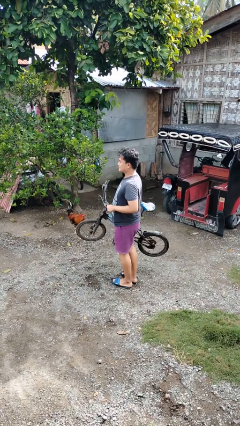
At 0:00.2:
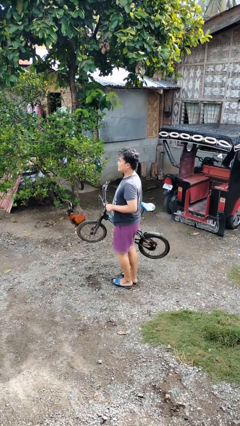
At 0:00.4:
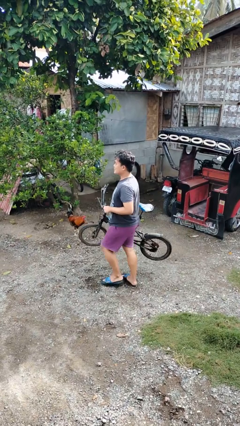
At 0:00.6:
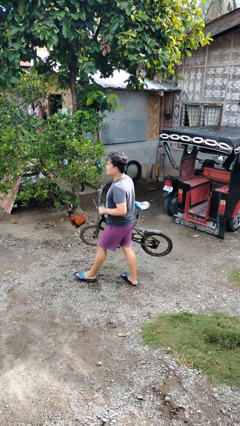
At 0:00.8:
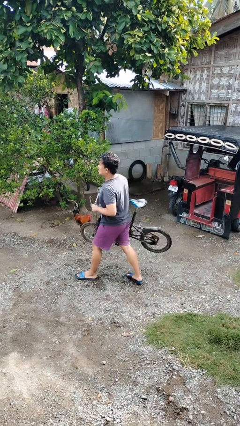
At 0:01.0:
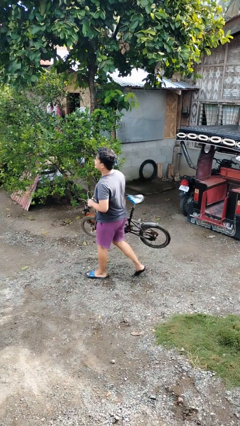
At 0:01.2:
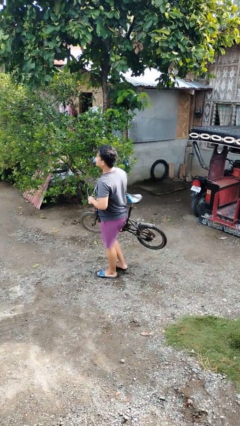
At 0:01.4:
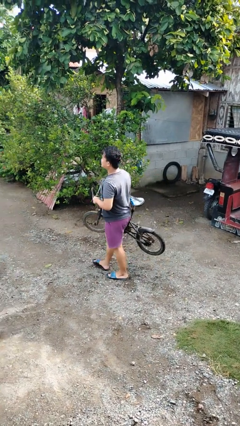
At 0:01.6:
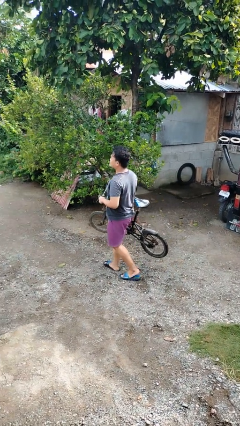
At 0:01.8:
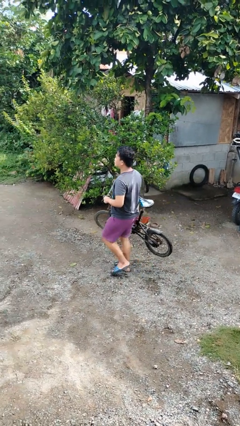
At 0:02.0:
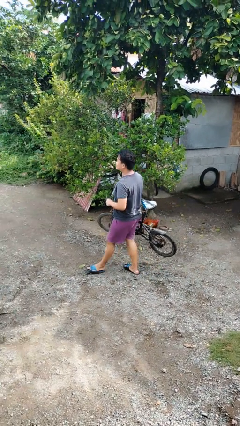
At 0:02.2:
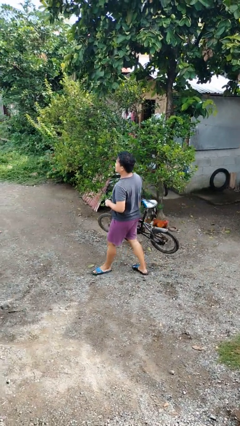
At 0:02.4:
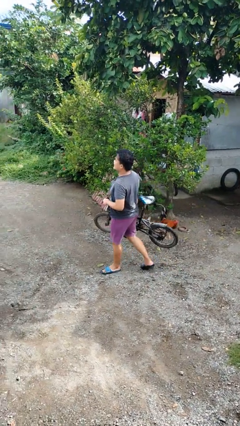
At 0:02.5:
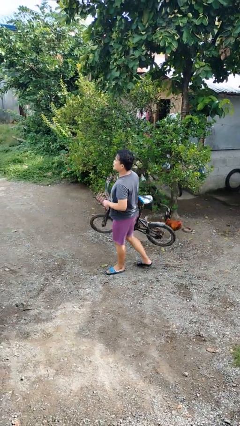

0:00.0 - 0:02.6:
person carries bicycle

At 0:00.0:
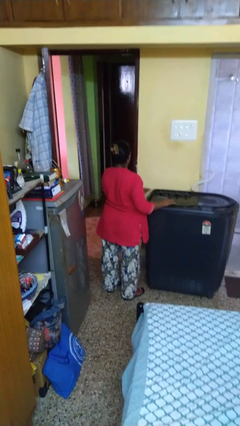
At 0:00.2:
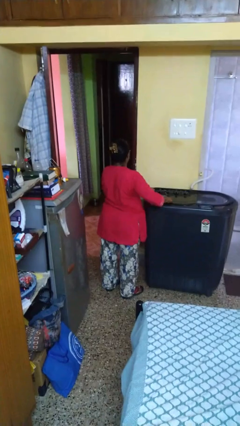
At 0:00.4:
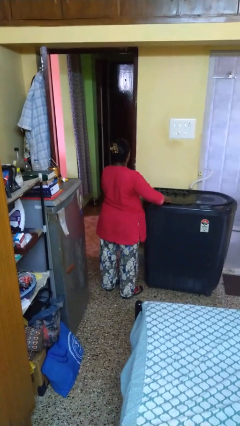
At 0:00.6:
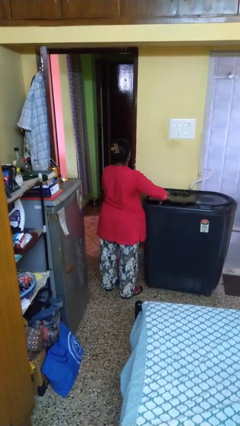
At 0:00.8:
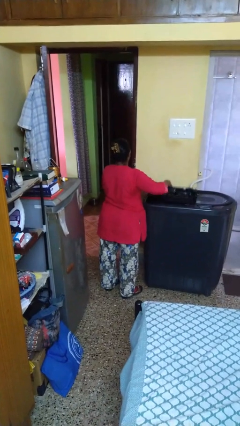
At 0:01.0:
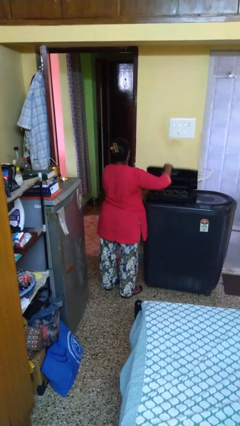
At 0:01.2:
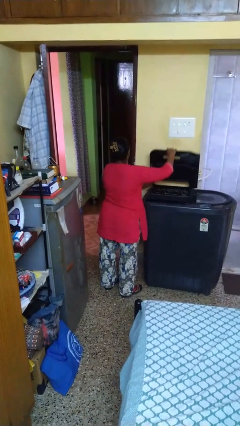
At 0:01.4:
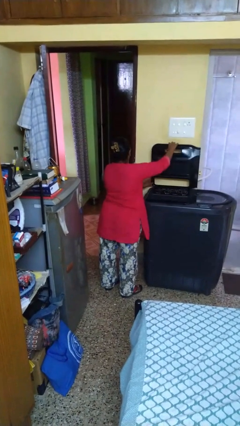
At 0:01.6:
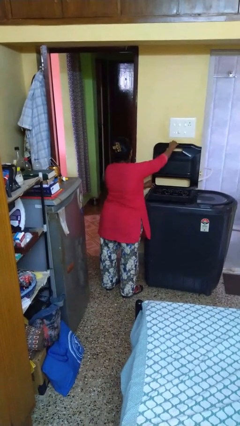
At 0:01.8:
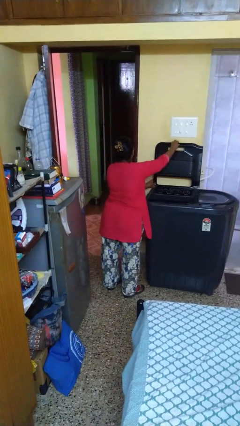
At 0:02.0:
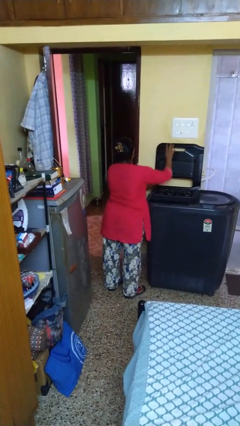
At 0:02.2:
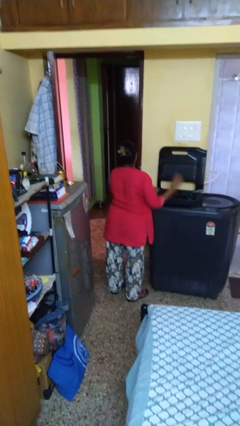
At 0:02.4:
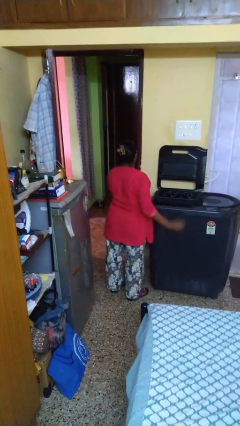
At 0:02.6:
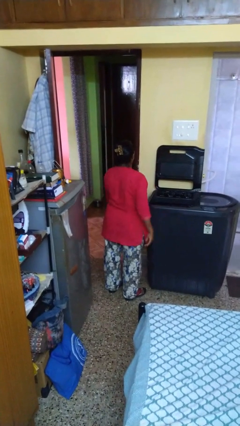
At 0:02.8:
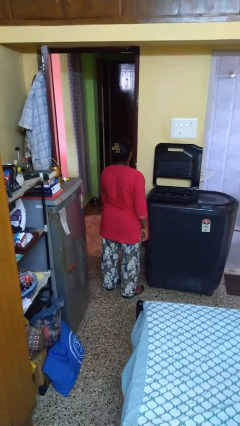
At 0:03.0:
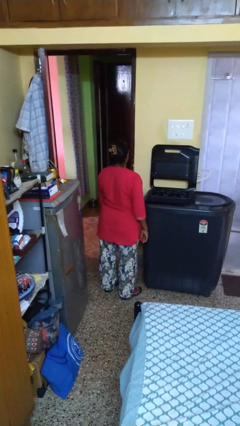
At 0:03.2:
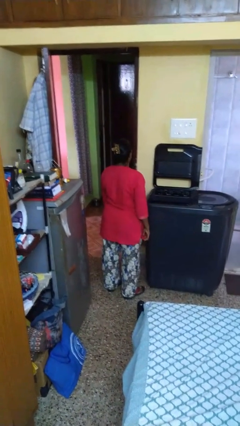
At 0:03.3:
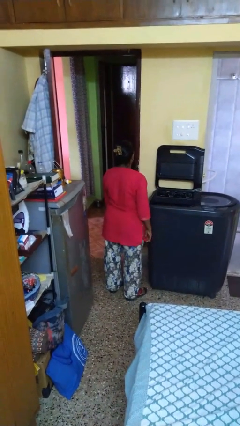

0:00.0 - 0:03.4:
person opens clothes washer

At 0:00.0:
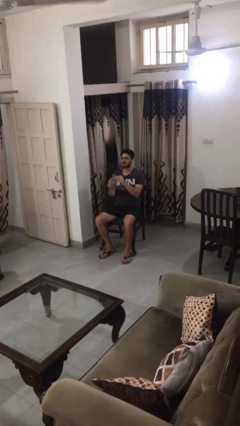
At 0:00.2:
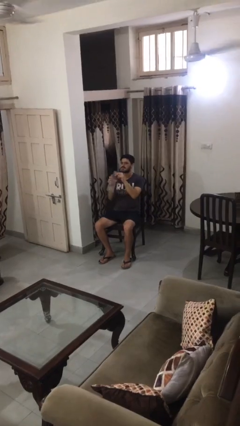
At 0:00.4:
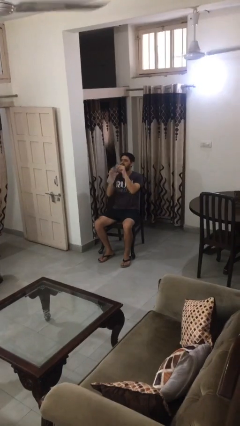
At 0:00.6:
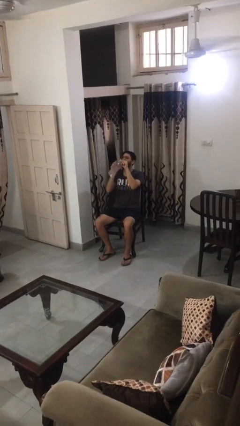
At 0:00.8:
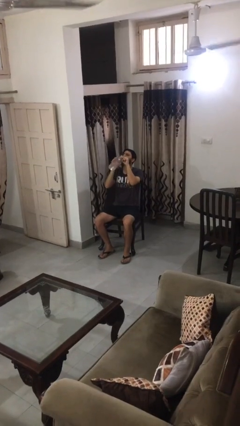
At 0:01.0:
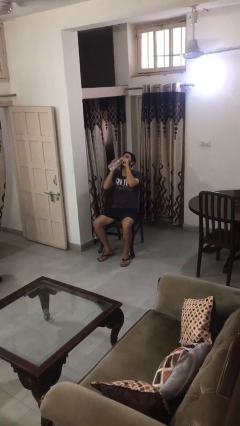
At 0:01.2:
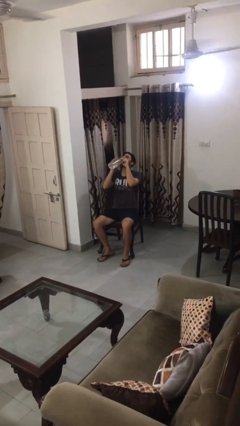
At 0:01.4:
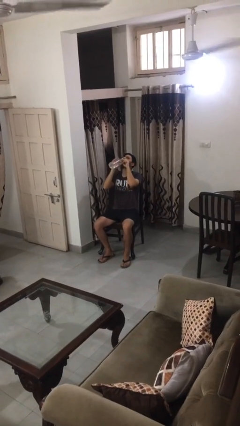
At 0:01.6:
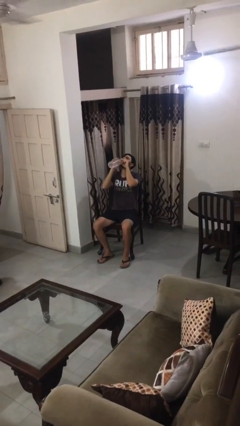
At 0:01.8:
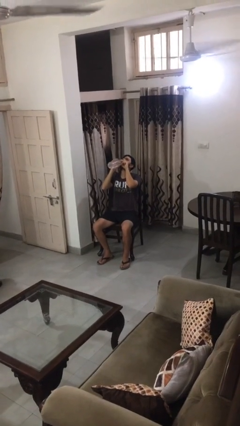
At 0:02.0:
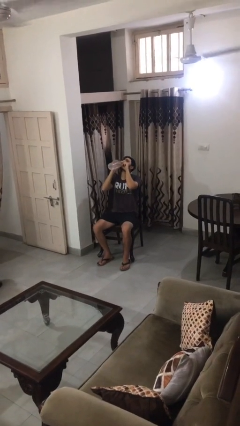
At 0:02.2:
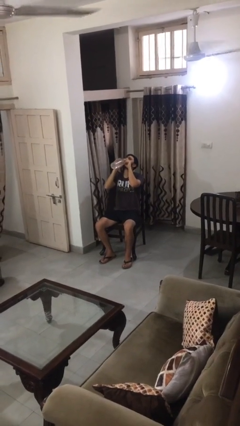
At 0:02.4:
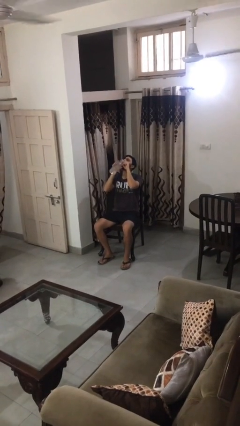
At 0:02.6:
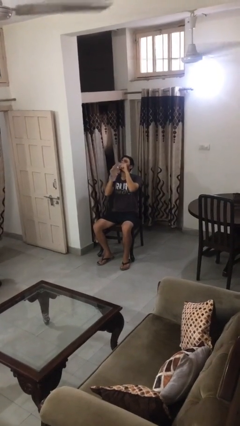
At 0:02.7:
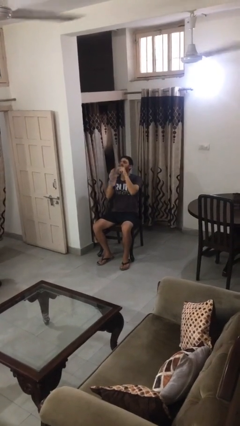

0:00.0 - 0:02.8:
person drinks from bottle

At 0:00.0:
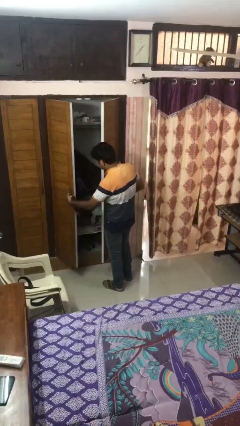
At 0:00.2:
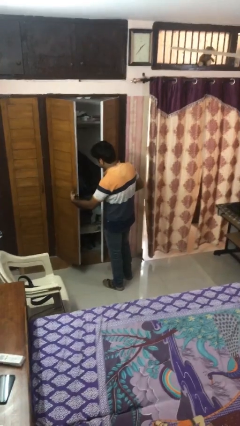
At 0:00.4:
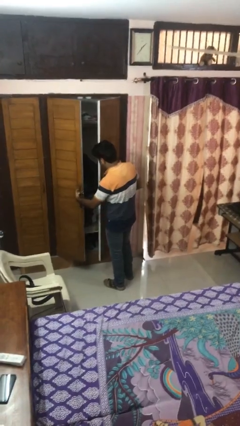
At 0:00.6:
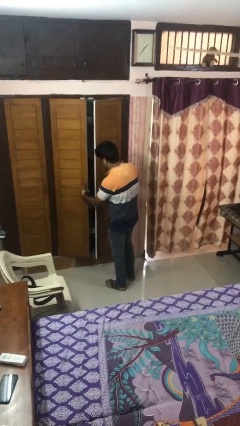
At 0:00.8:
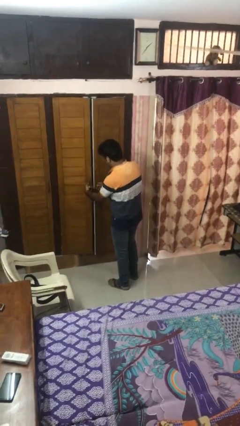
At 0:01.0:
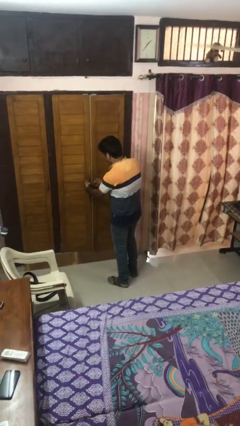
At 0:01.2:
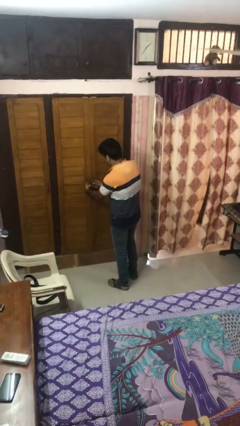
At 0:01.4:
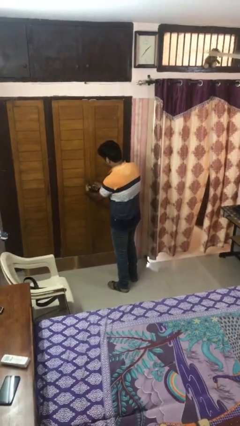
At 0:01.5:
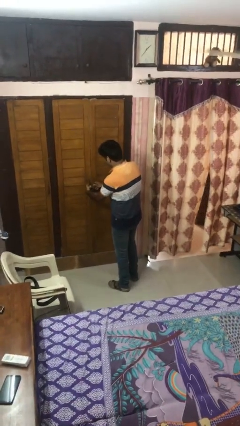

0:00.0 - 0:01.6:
person closes facility door

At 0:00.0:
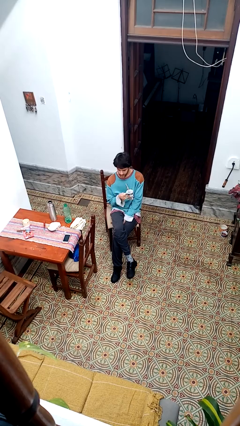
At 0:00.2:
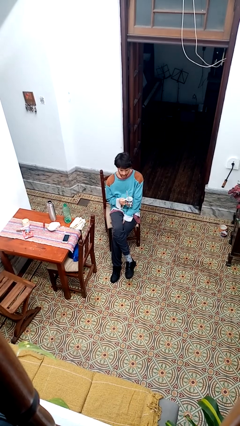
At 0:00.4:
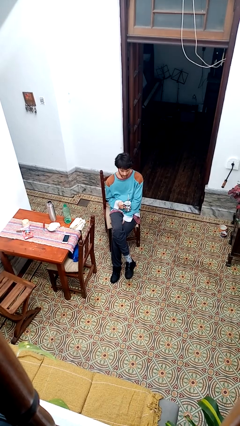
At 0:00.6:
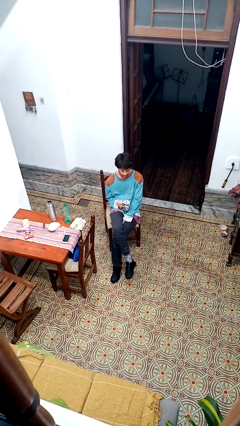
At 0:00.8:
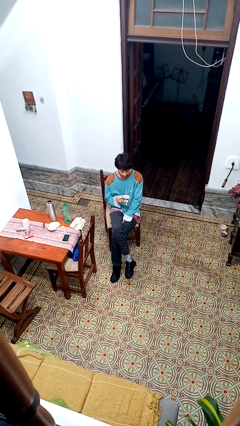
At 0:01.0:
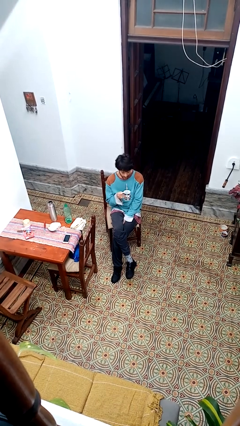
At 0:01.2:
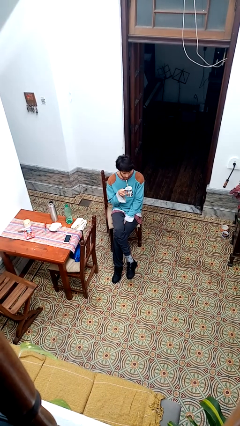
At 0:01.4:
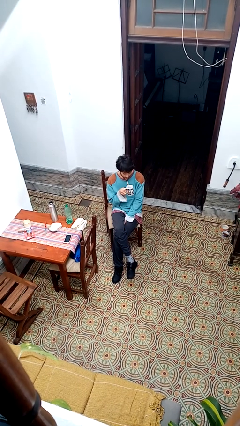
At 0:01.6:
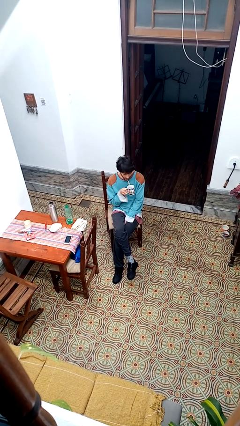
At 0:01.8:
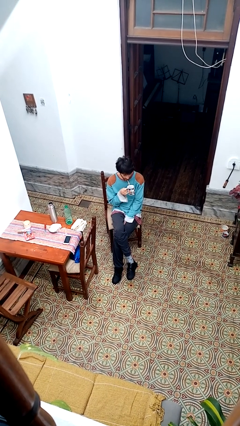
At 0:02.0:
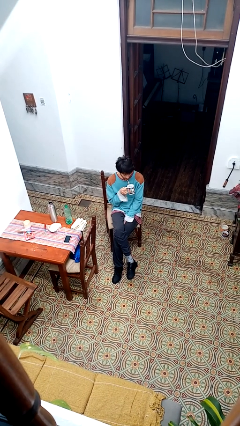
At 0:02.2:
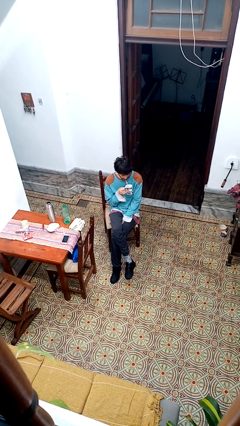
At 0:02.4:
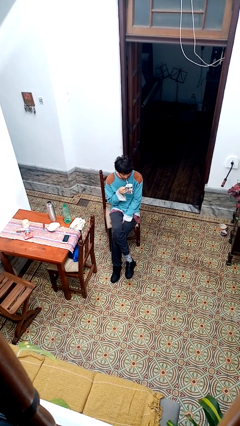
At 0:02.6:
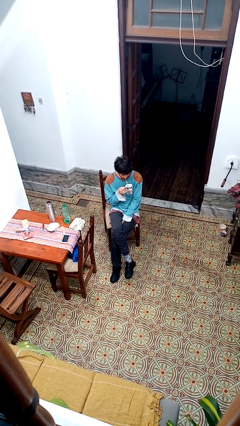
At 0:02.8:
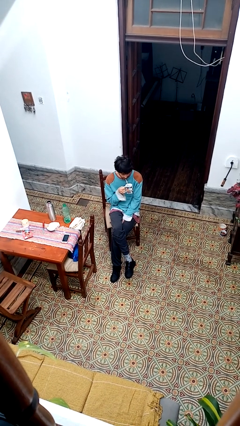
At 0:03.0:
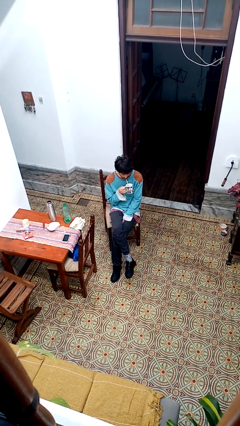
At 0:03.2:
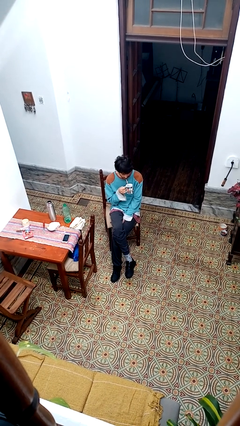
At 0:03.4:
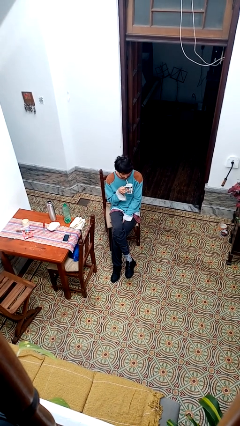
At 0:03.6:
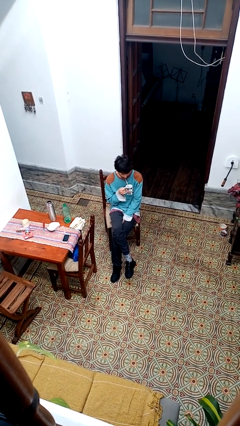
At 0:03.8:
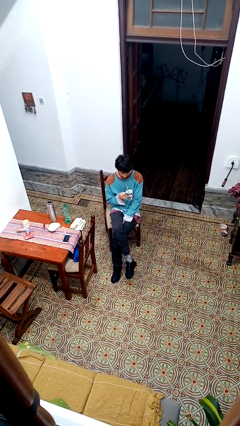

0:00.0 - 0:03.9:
person drinks from straw

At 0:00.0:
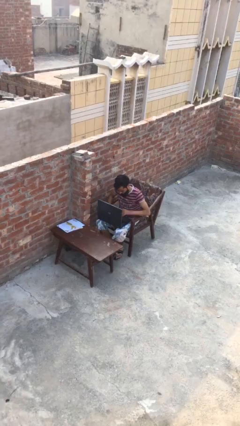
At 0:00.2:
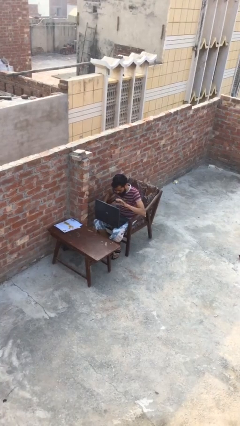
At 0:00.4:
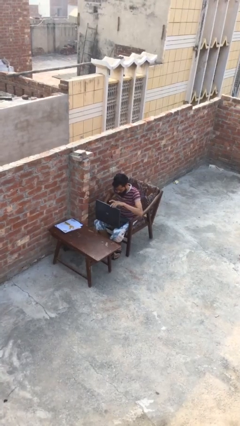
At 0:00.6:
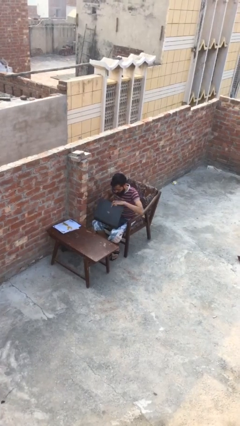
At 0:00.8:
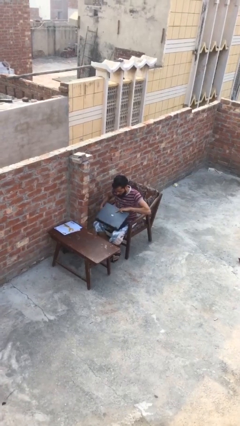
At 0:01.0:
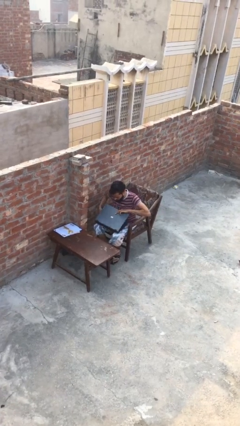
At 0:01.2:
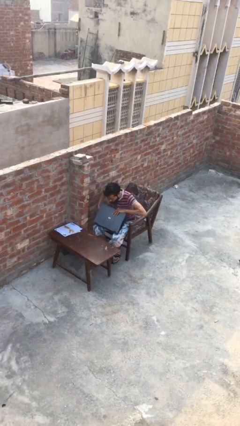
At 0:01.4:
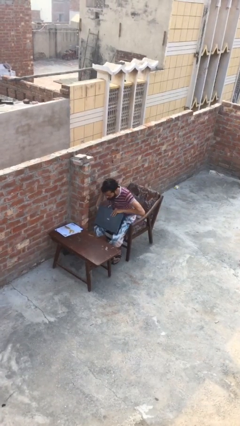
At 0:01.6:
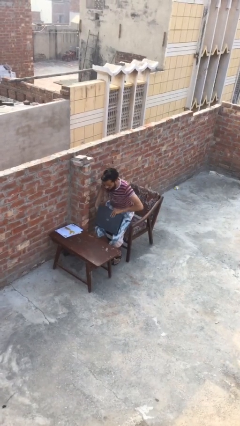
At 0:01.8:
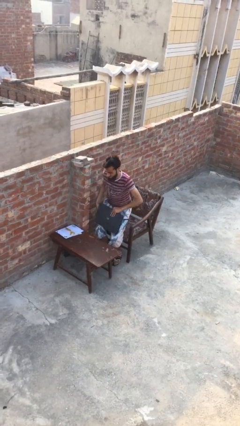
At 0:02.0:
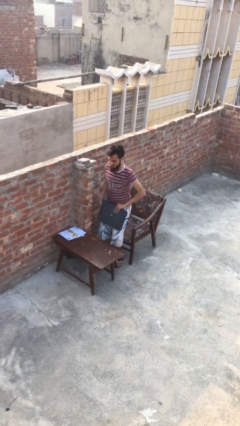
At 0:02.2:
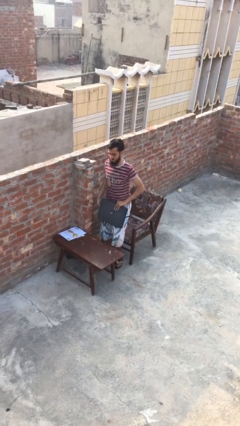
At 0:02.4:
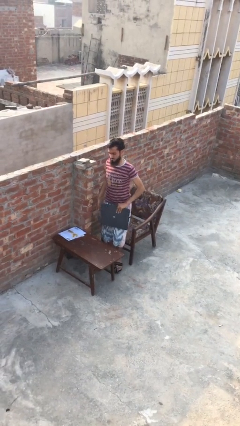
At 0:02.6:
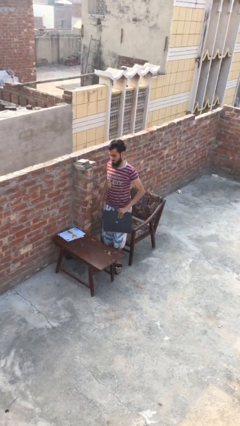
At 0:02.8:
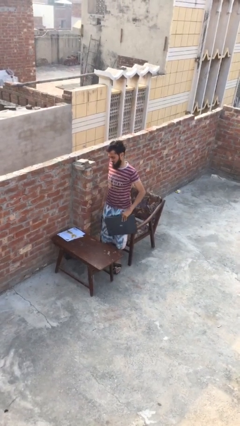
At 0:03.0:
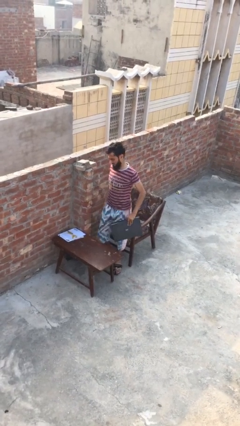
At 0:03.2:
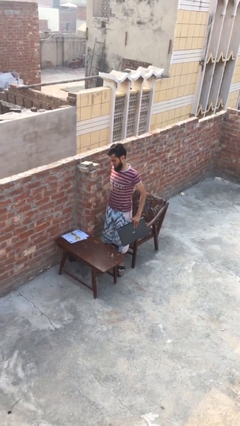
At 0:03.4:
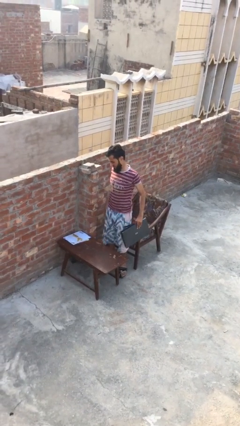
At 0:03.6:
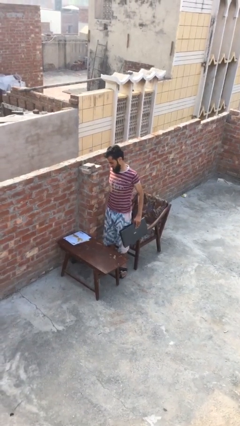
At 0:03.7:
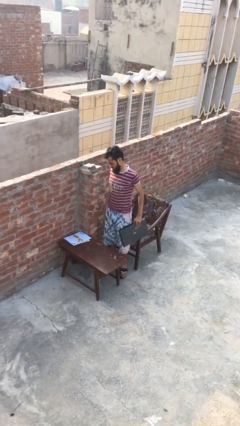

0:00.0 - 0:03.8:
person stands up
